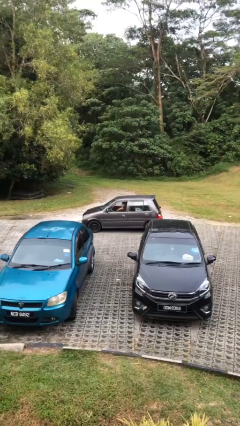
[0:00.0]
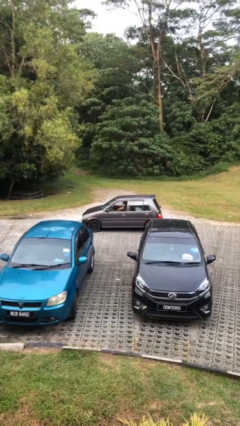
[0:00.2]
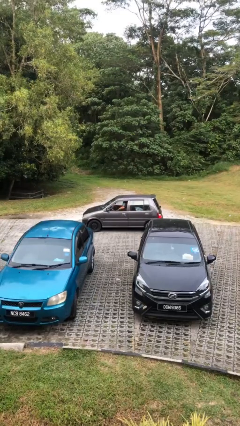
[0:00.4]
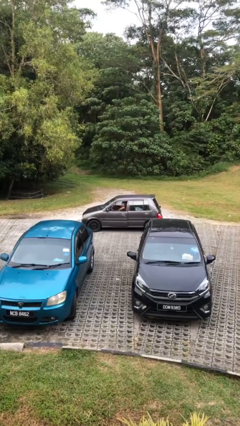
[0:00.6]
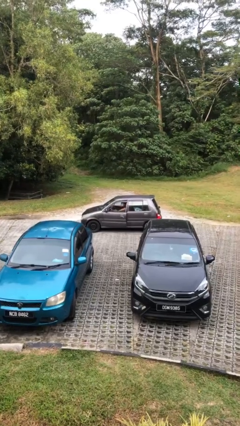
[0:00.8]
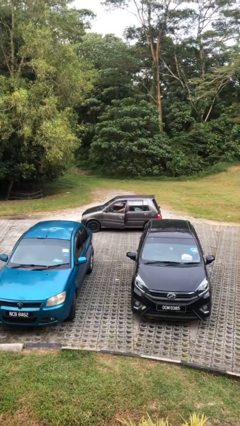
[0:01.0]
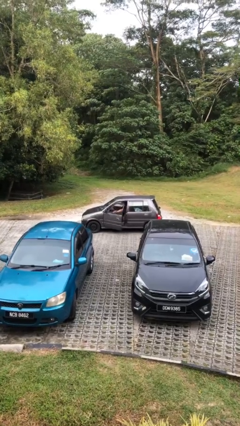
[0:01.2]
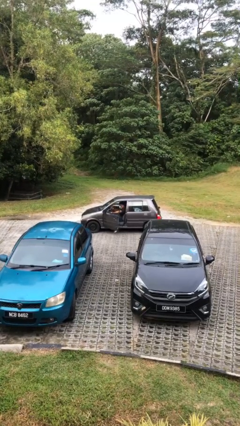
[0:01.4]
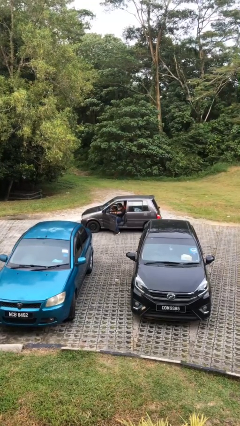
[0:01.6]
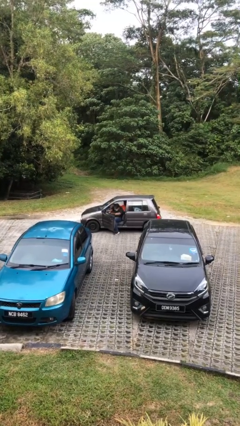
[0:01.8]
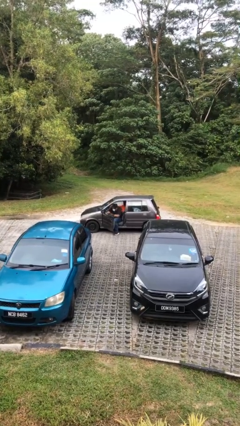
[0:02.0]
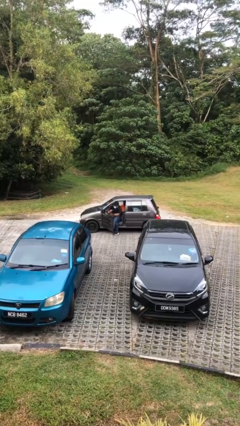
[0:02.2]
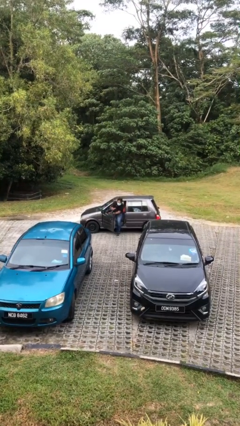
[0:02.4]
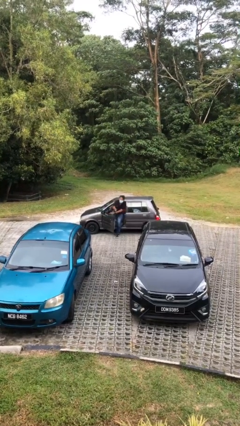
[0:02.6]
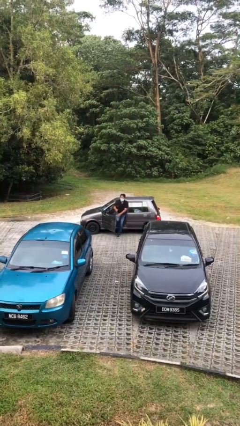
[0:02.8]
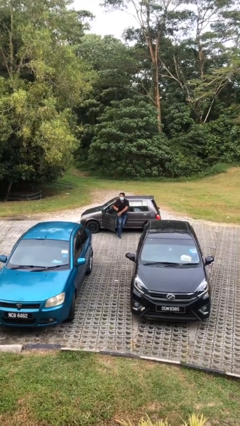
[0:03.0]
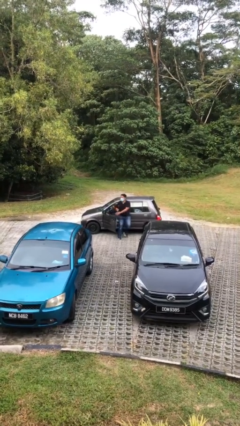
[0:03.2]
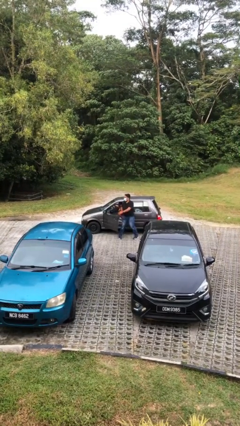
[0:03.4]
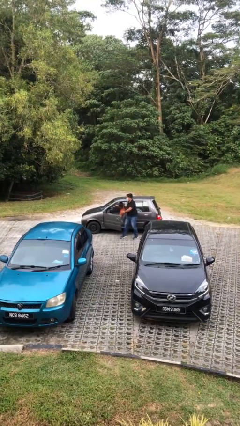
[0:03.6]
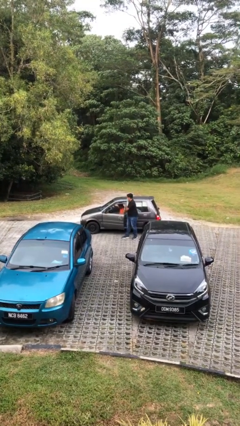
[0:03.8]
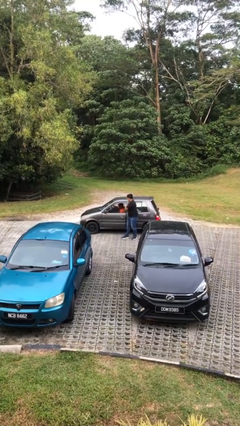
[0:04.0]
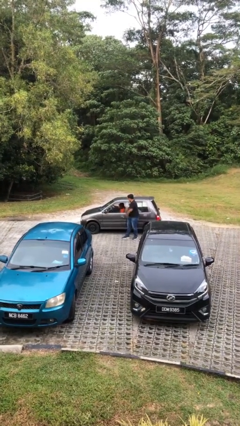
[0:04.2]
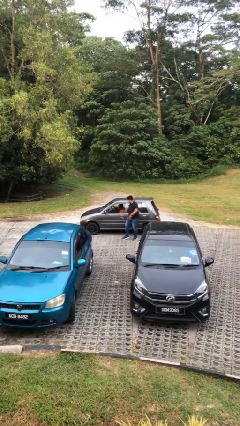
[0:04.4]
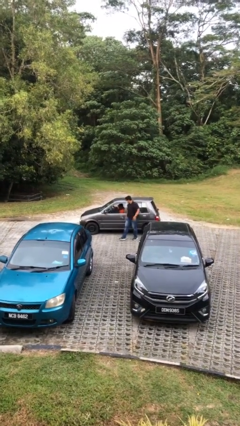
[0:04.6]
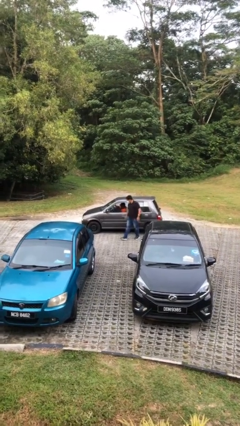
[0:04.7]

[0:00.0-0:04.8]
car drops off person

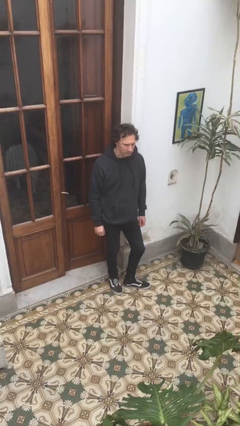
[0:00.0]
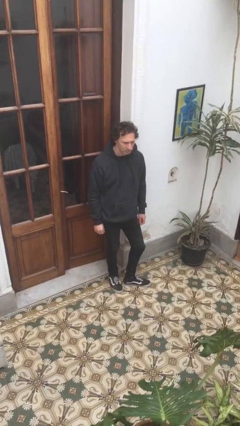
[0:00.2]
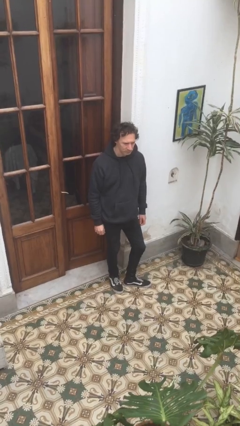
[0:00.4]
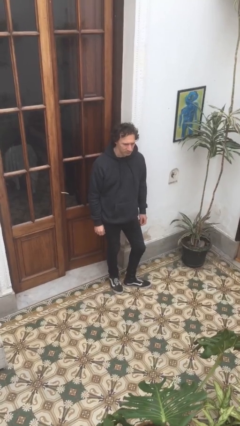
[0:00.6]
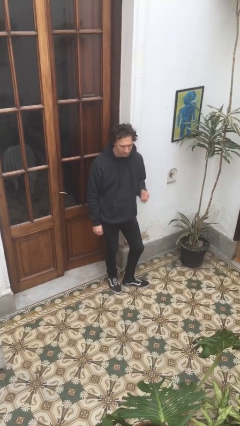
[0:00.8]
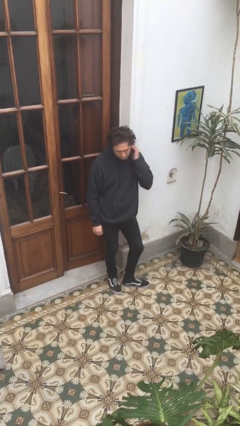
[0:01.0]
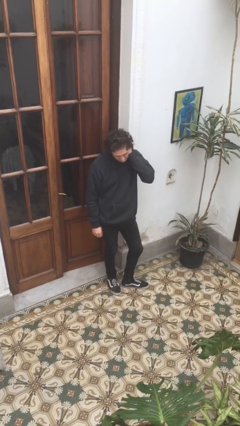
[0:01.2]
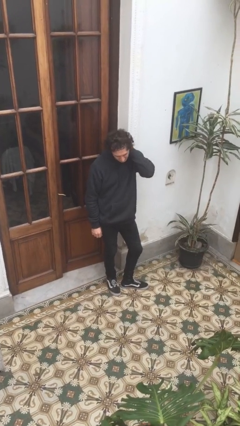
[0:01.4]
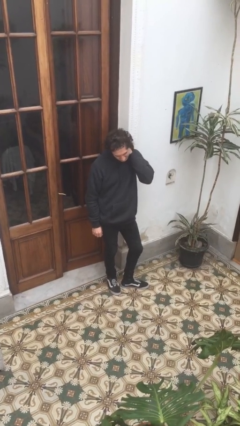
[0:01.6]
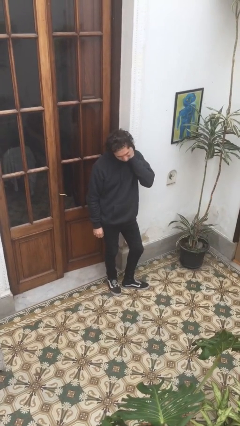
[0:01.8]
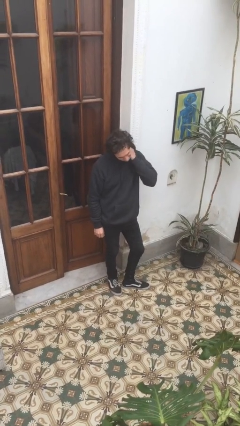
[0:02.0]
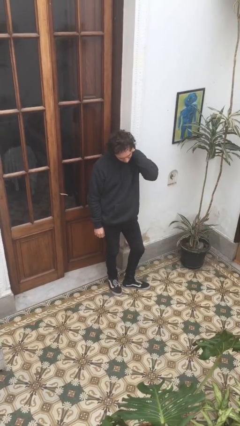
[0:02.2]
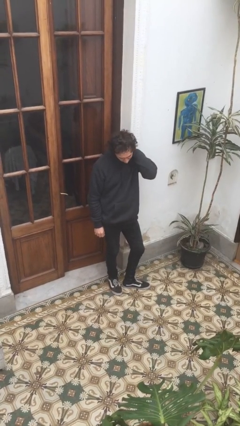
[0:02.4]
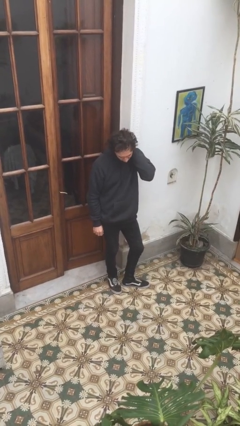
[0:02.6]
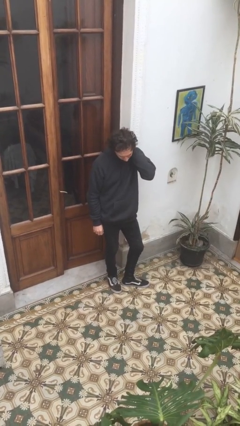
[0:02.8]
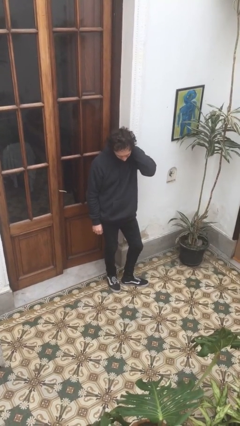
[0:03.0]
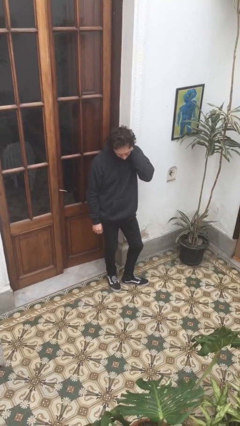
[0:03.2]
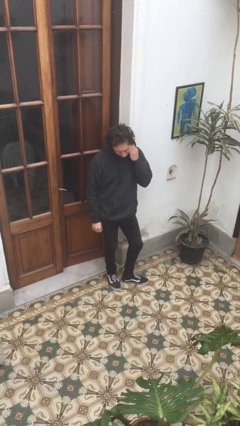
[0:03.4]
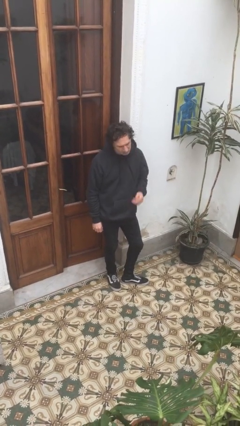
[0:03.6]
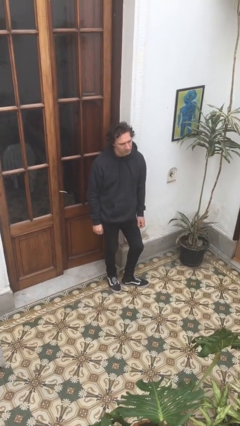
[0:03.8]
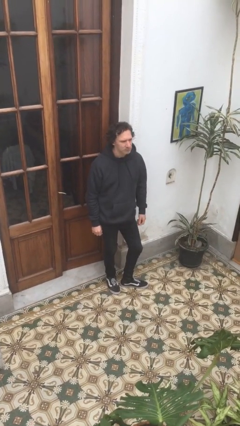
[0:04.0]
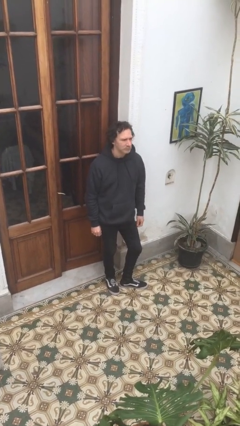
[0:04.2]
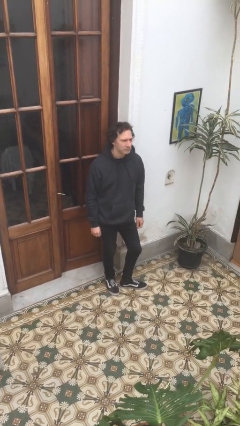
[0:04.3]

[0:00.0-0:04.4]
person rubs neck

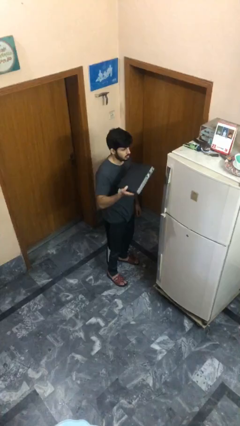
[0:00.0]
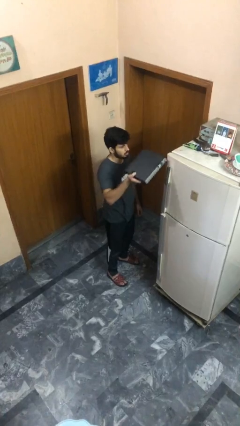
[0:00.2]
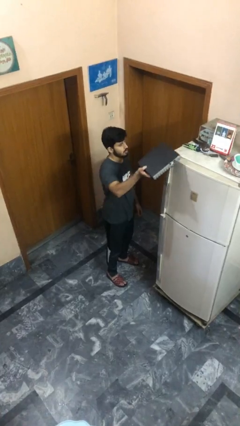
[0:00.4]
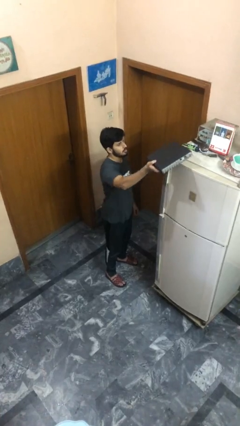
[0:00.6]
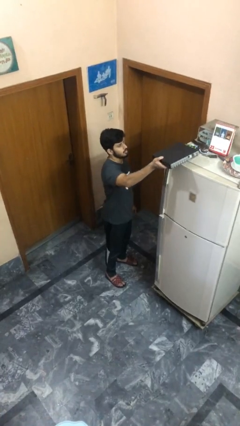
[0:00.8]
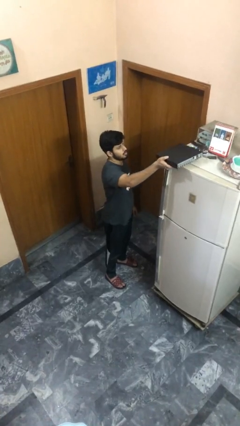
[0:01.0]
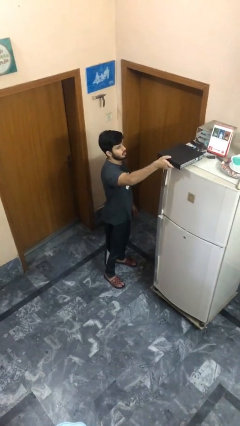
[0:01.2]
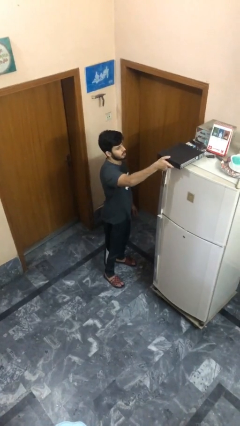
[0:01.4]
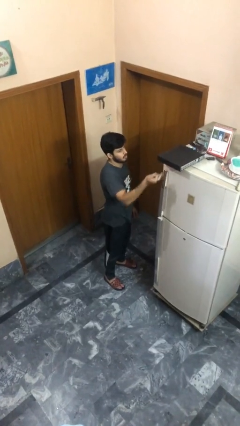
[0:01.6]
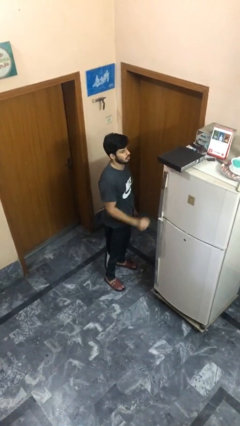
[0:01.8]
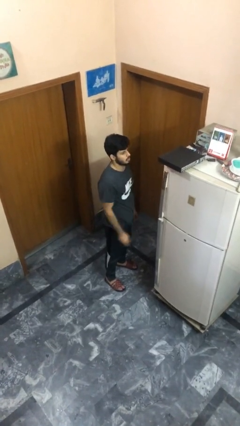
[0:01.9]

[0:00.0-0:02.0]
person puts down object on countertop

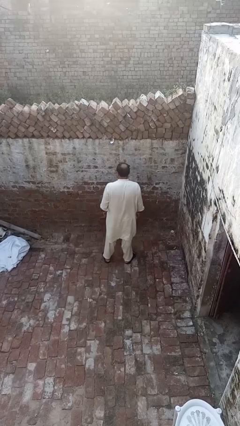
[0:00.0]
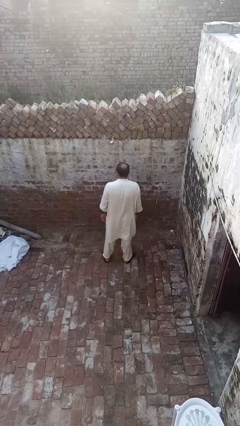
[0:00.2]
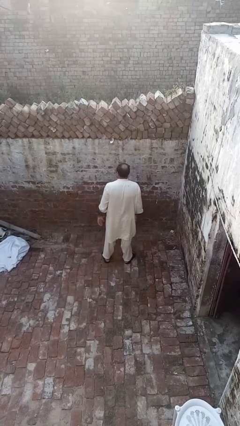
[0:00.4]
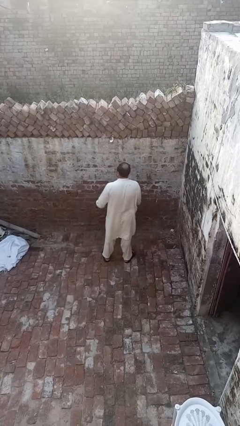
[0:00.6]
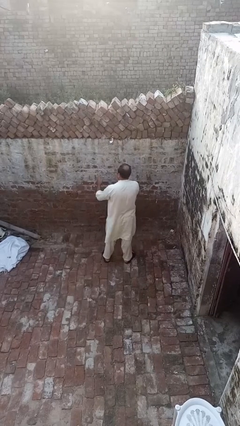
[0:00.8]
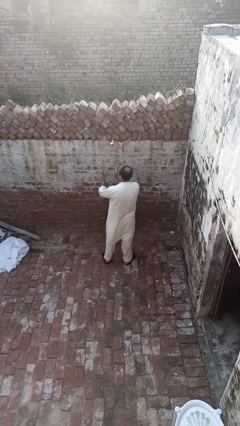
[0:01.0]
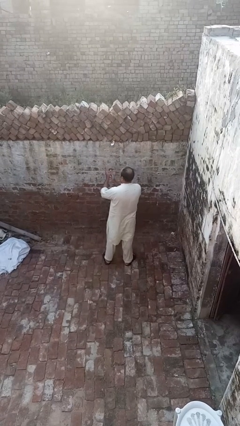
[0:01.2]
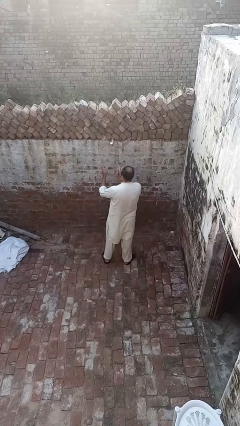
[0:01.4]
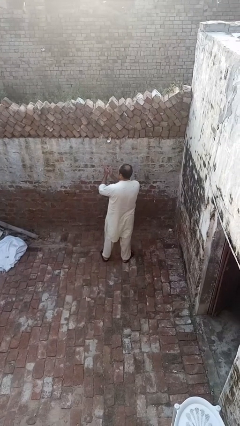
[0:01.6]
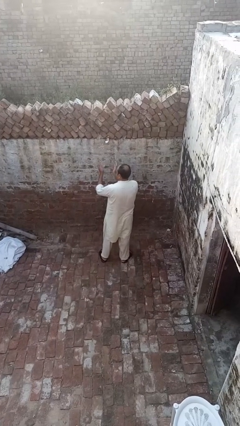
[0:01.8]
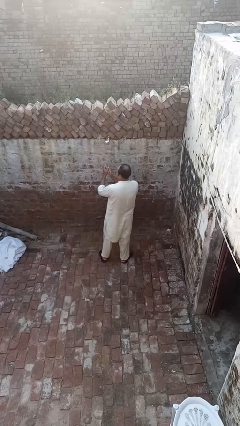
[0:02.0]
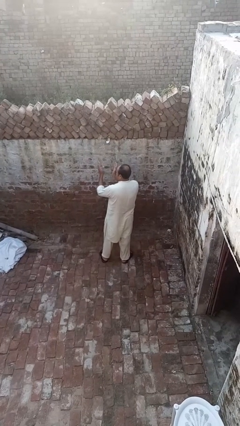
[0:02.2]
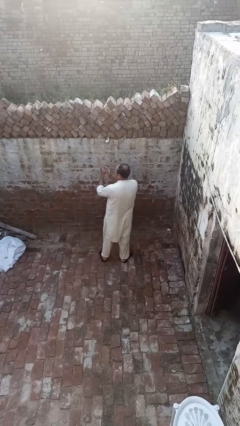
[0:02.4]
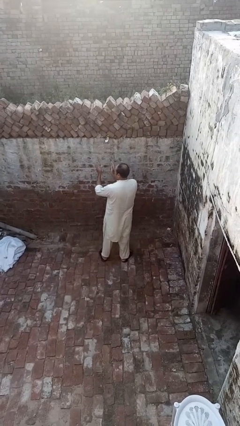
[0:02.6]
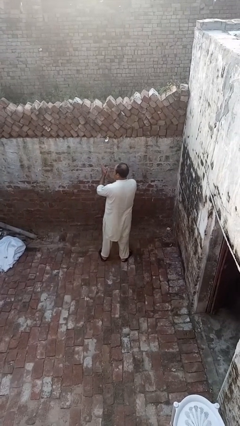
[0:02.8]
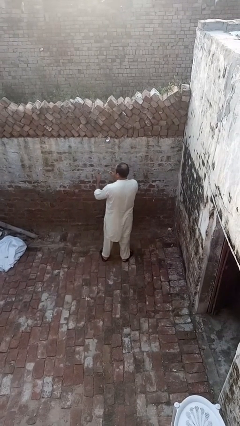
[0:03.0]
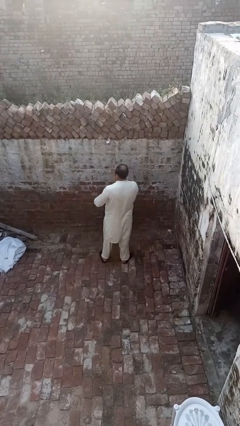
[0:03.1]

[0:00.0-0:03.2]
person claps hands

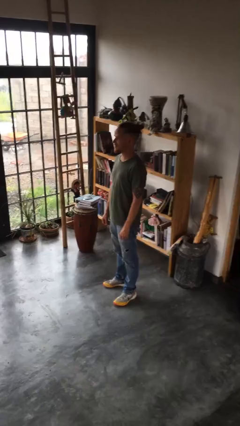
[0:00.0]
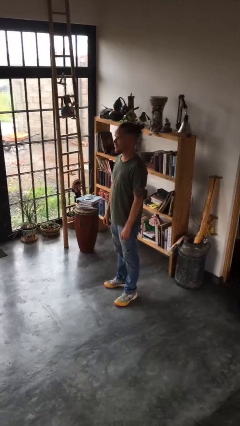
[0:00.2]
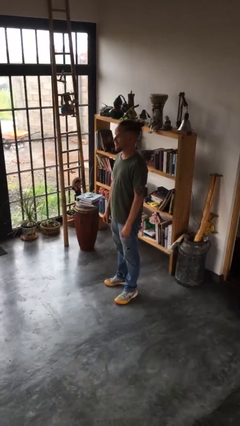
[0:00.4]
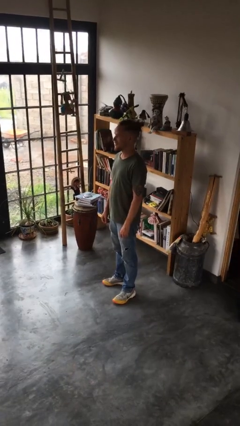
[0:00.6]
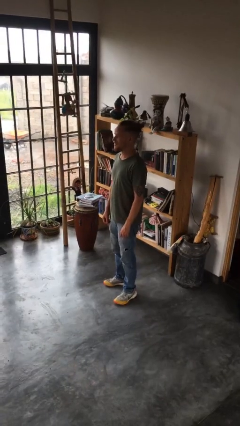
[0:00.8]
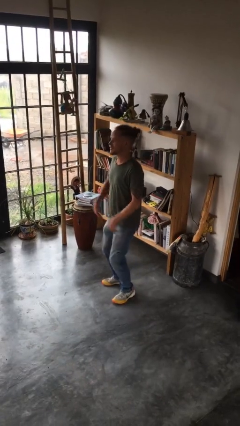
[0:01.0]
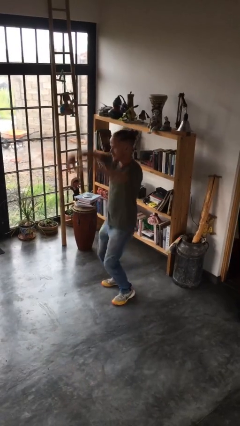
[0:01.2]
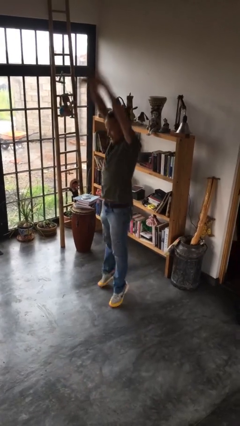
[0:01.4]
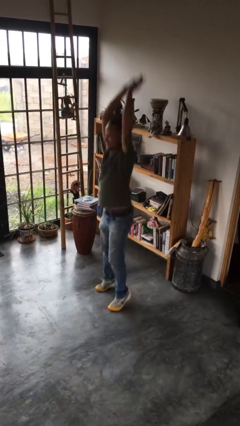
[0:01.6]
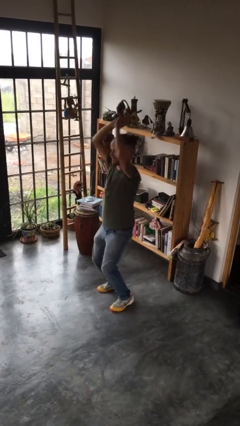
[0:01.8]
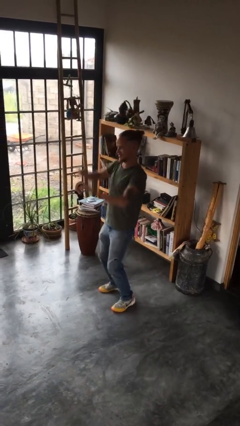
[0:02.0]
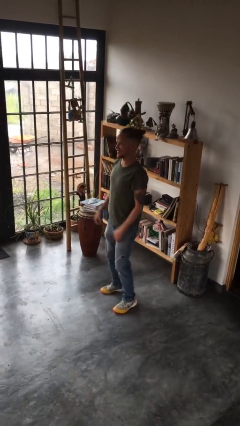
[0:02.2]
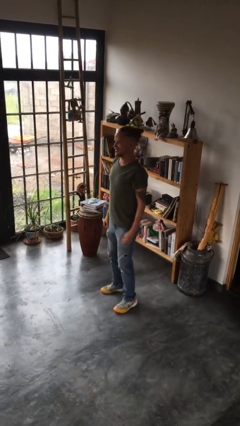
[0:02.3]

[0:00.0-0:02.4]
person jumps
